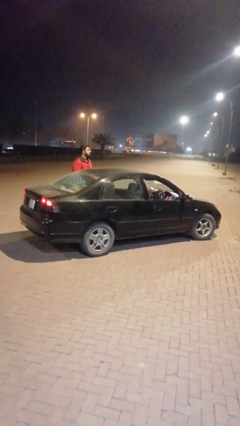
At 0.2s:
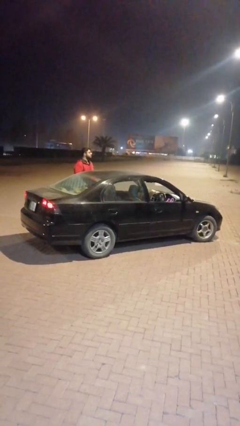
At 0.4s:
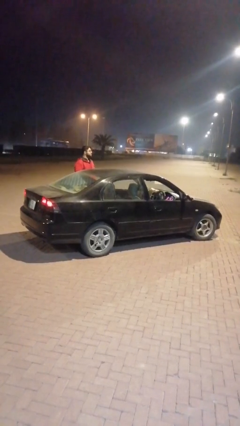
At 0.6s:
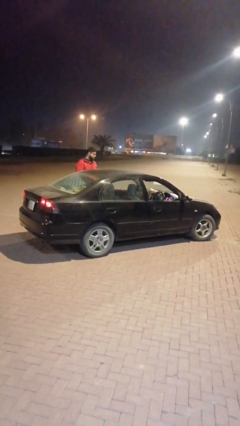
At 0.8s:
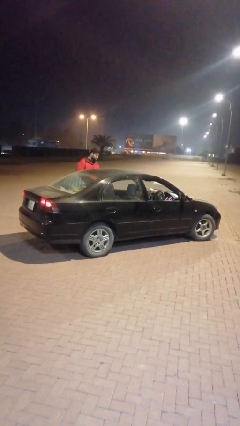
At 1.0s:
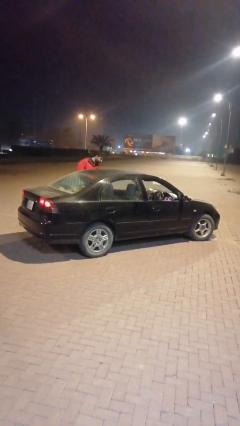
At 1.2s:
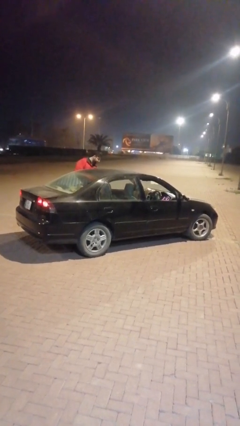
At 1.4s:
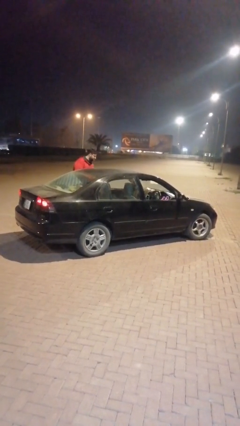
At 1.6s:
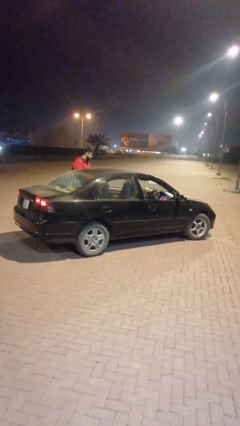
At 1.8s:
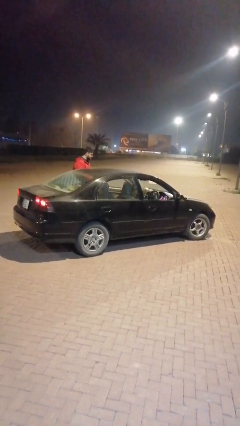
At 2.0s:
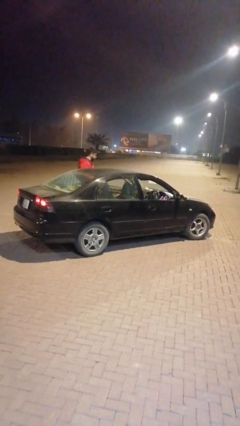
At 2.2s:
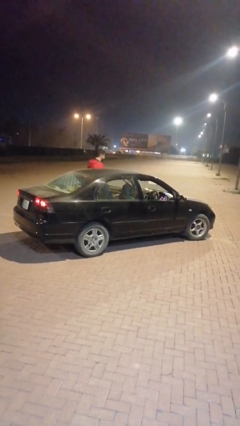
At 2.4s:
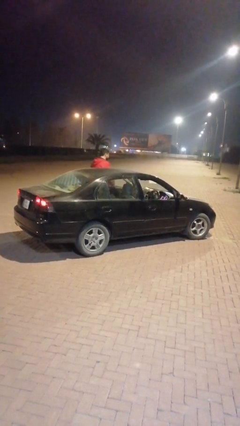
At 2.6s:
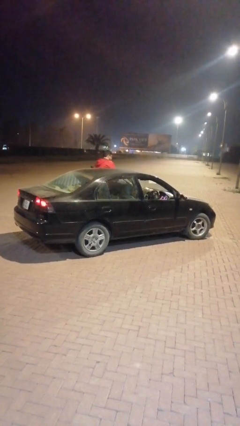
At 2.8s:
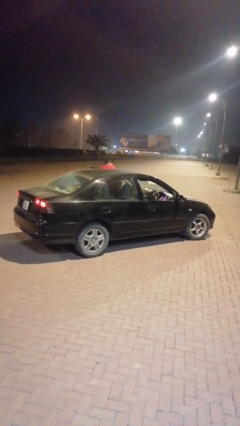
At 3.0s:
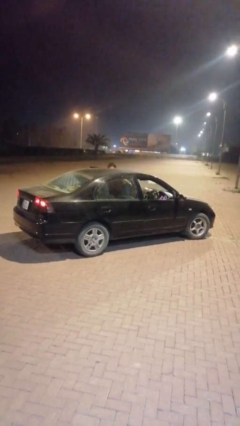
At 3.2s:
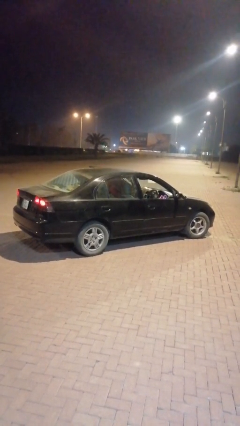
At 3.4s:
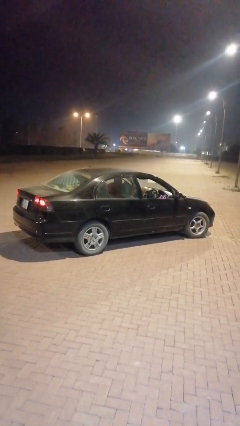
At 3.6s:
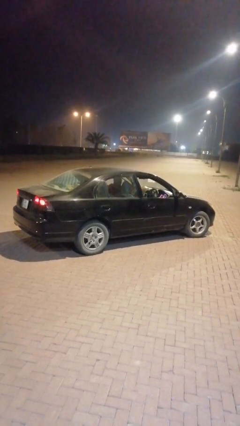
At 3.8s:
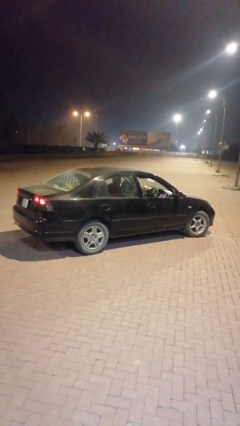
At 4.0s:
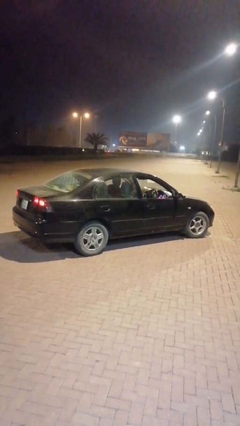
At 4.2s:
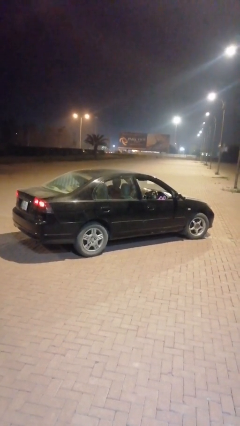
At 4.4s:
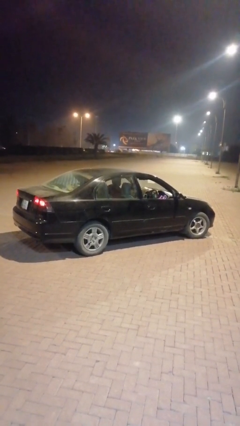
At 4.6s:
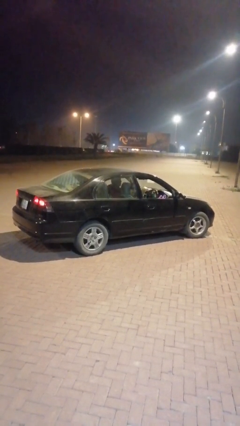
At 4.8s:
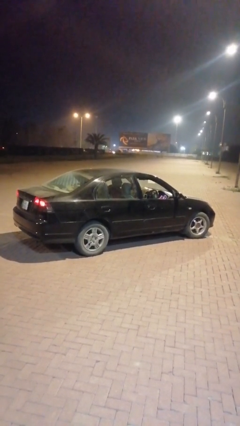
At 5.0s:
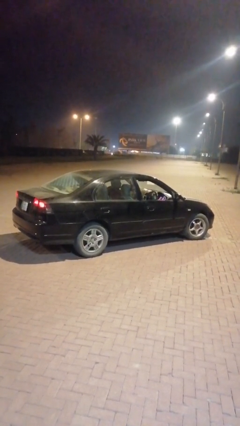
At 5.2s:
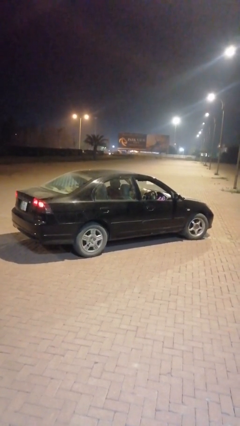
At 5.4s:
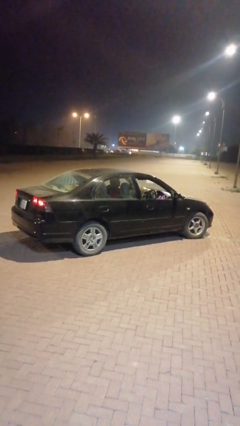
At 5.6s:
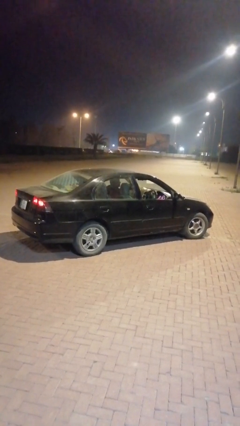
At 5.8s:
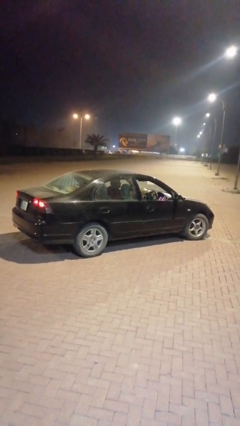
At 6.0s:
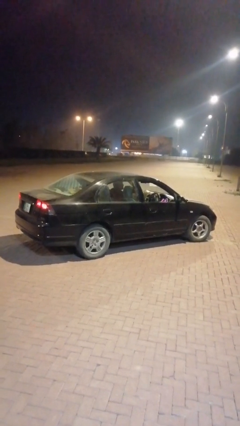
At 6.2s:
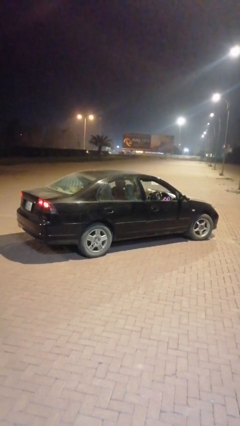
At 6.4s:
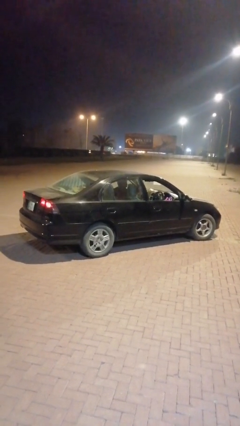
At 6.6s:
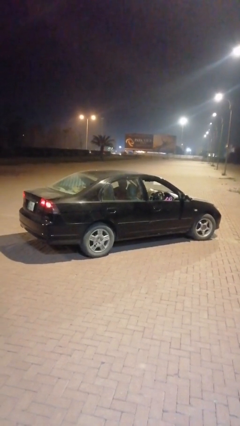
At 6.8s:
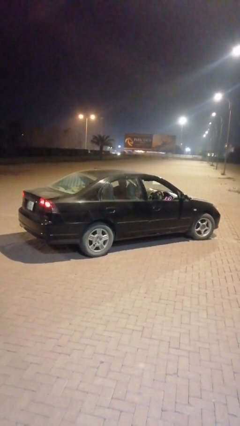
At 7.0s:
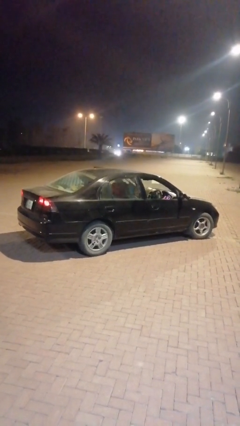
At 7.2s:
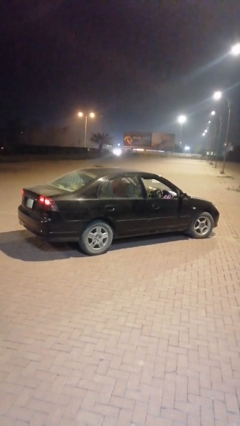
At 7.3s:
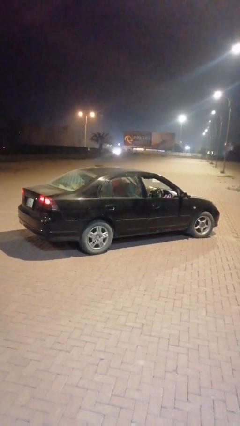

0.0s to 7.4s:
car picks up person

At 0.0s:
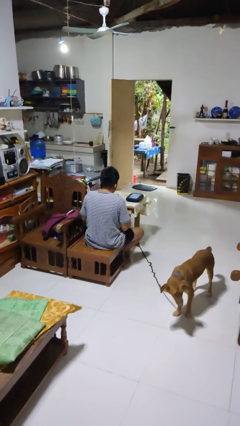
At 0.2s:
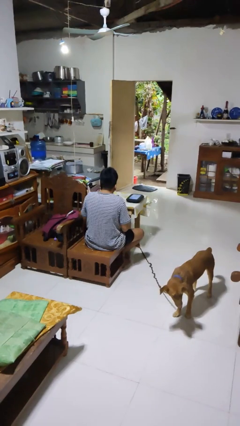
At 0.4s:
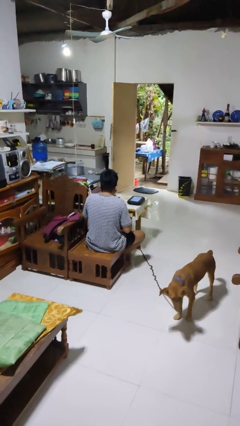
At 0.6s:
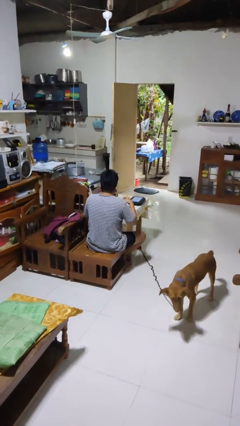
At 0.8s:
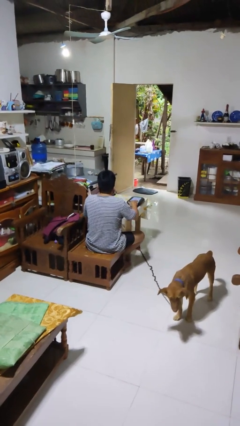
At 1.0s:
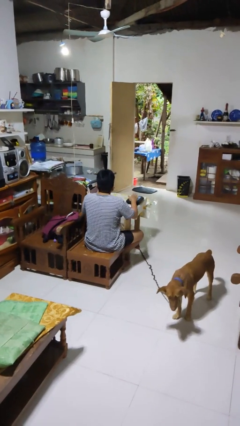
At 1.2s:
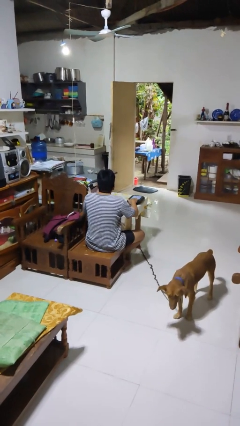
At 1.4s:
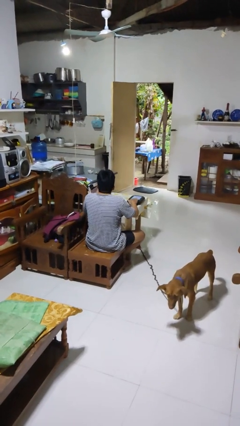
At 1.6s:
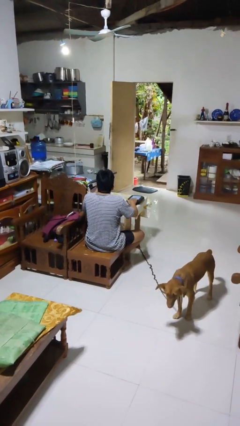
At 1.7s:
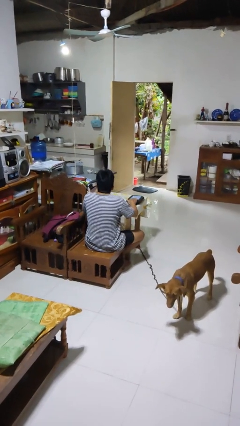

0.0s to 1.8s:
person taps object with finger

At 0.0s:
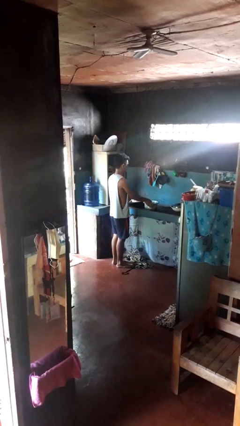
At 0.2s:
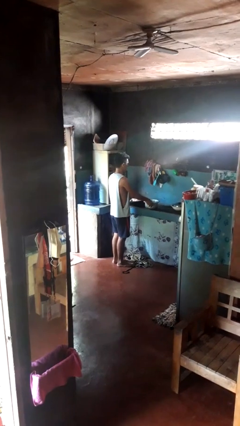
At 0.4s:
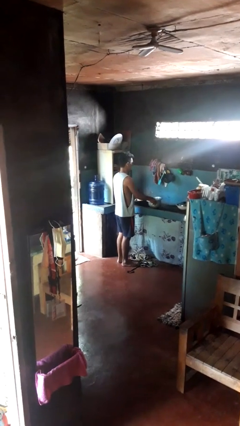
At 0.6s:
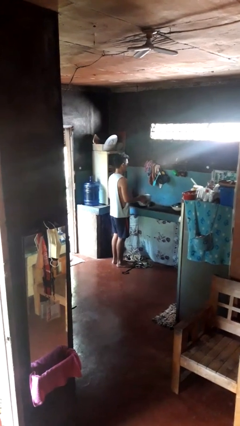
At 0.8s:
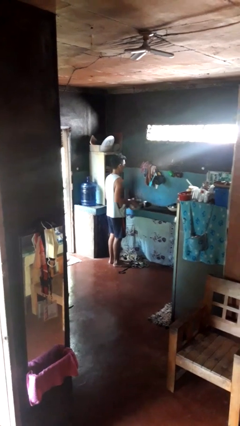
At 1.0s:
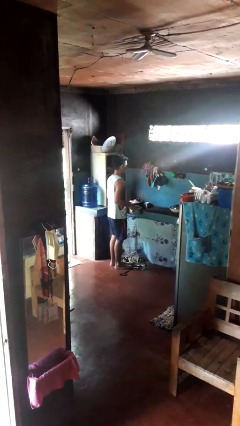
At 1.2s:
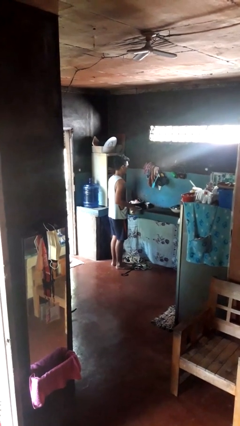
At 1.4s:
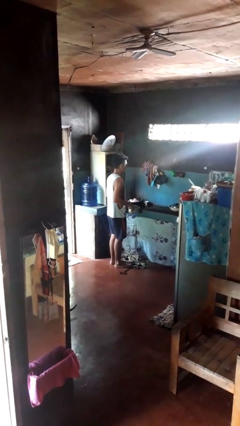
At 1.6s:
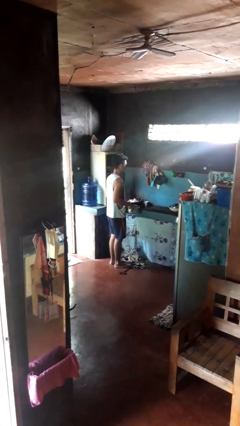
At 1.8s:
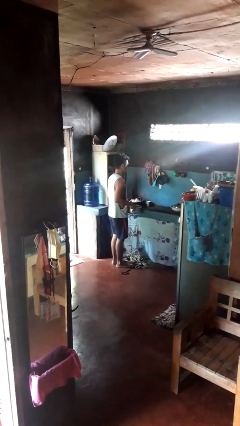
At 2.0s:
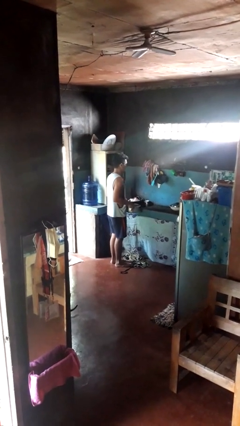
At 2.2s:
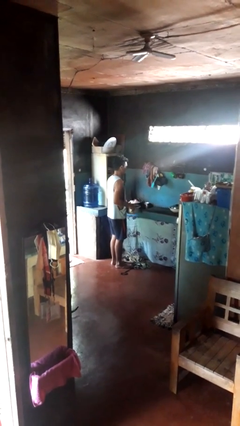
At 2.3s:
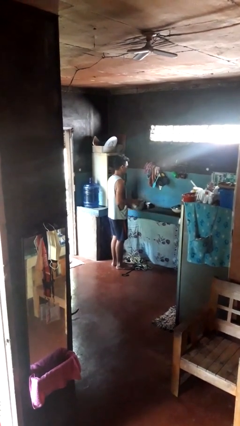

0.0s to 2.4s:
person picks up object from countertop

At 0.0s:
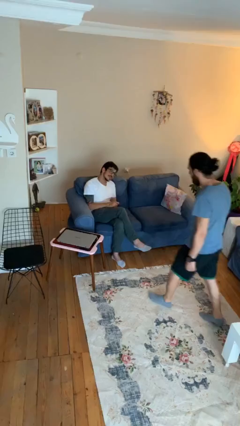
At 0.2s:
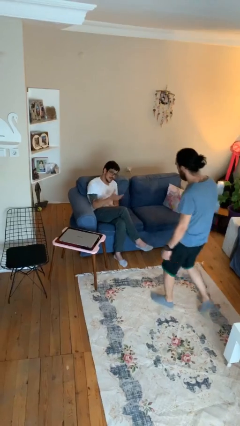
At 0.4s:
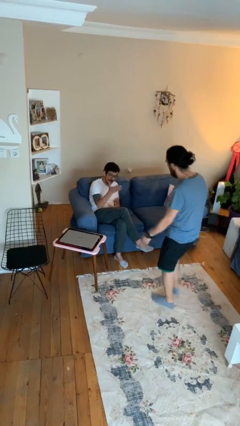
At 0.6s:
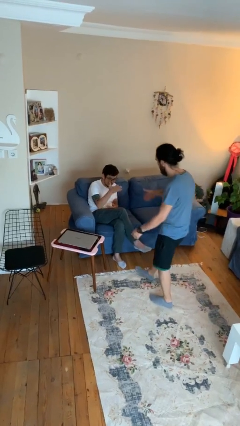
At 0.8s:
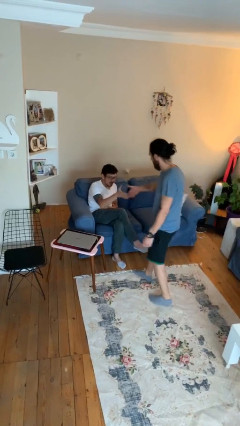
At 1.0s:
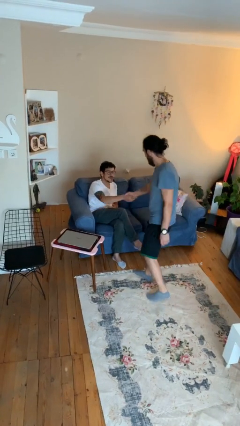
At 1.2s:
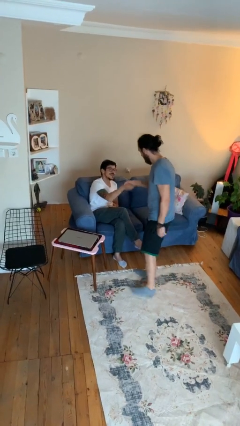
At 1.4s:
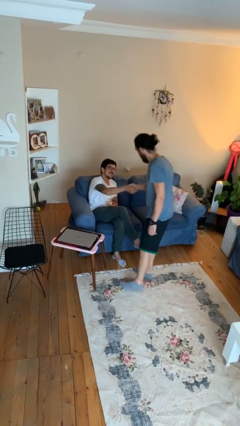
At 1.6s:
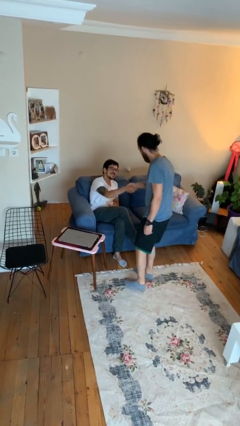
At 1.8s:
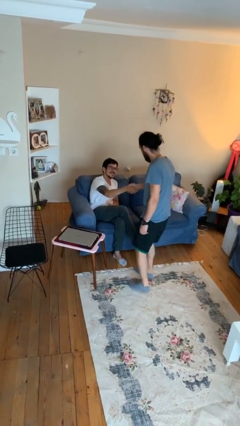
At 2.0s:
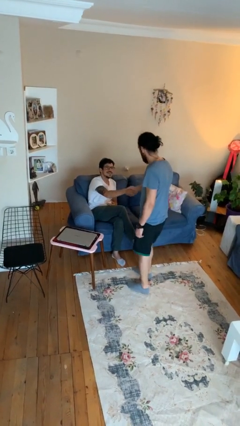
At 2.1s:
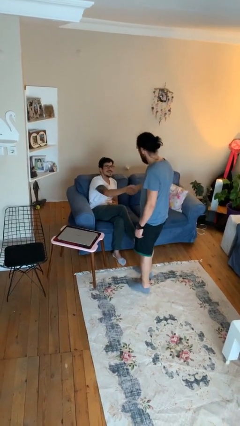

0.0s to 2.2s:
person shakes hand

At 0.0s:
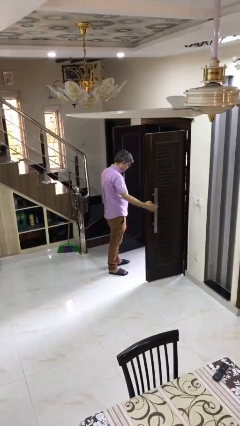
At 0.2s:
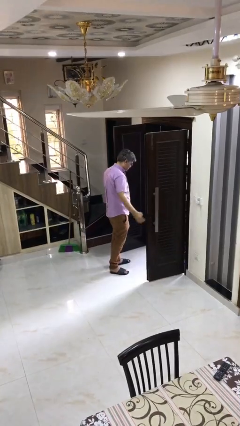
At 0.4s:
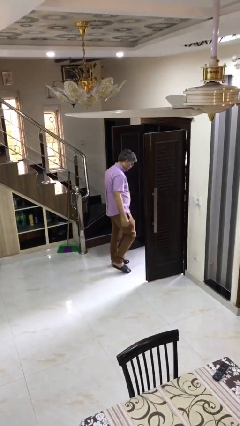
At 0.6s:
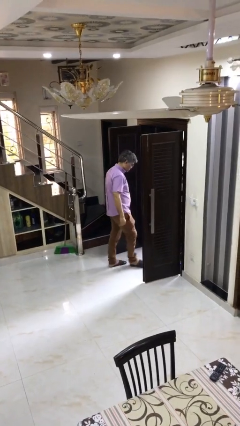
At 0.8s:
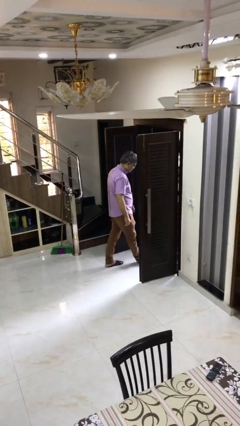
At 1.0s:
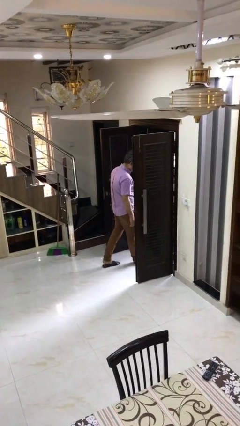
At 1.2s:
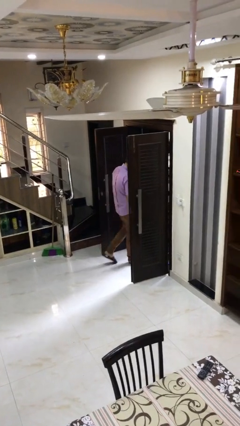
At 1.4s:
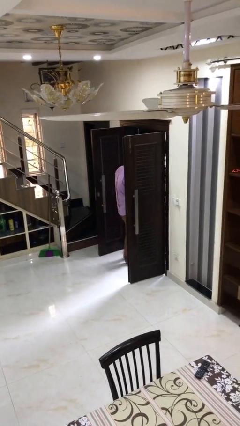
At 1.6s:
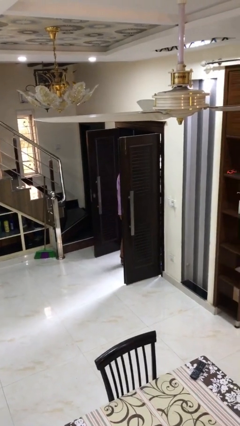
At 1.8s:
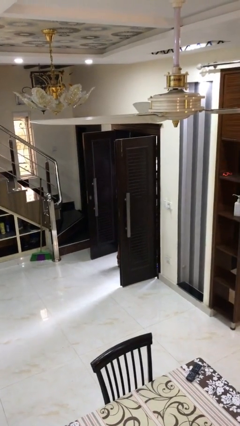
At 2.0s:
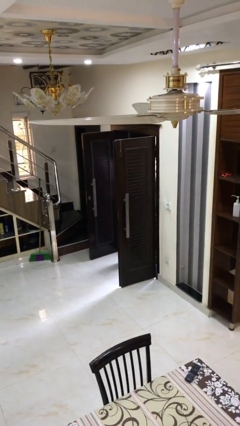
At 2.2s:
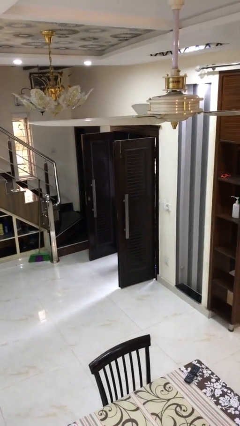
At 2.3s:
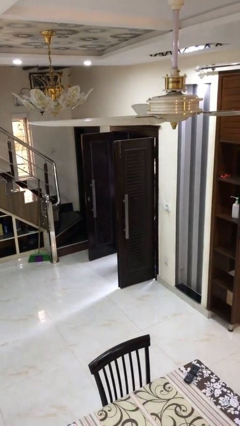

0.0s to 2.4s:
person exits scene through structure

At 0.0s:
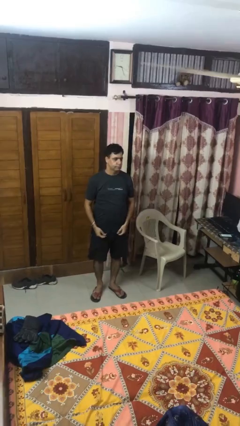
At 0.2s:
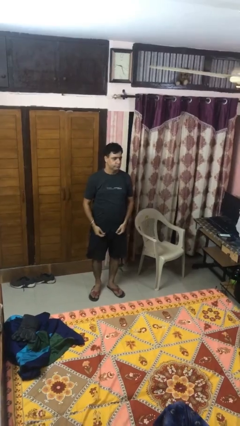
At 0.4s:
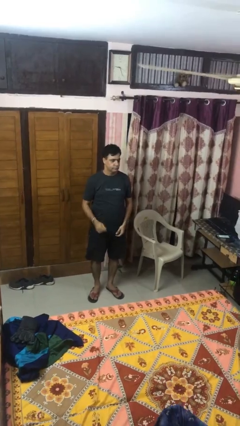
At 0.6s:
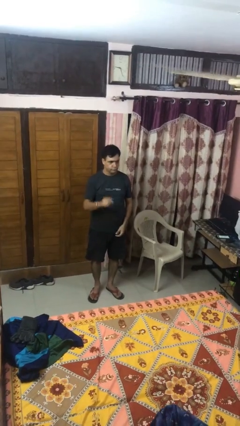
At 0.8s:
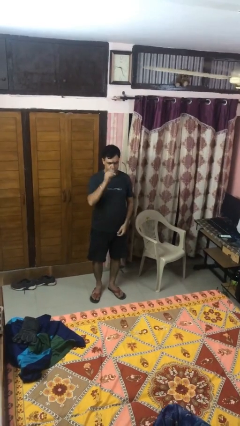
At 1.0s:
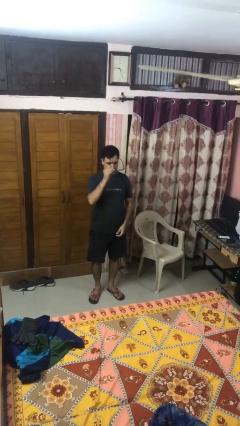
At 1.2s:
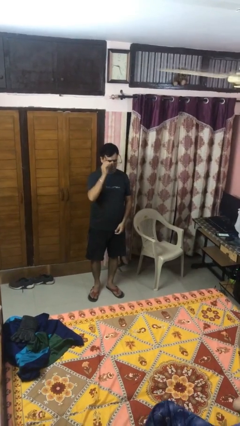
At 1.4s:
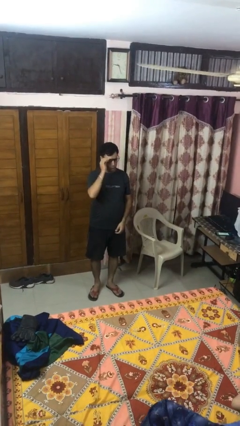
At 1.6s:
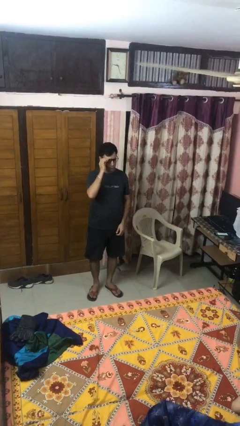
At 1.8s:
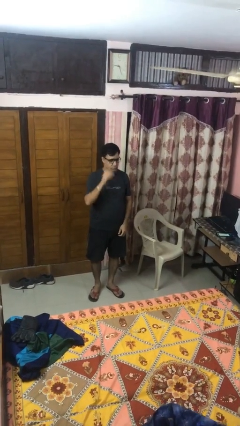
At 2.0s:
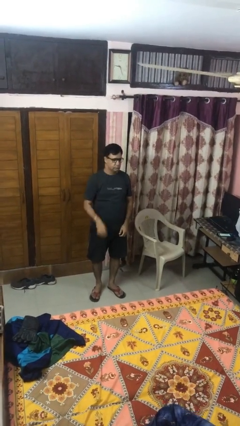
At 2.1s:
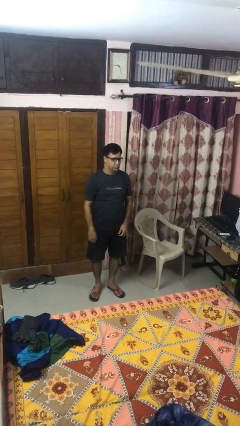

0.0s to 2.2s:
person puts on glasses
